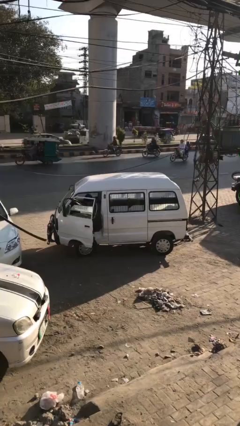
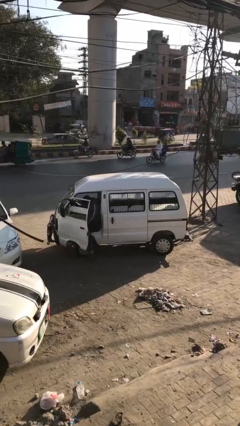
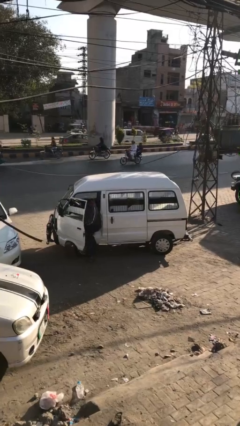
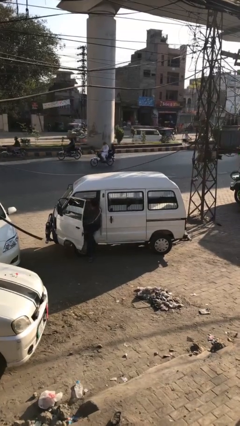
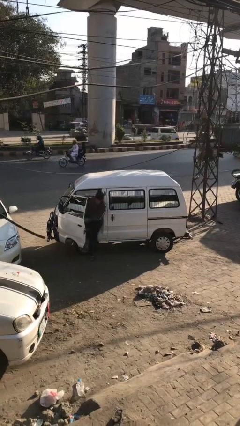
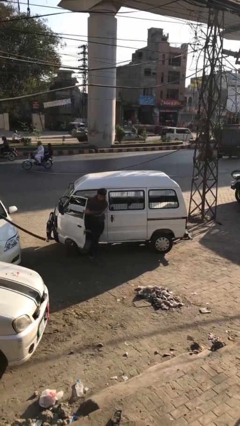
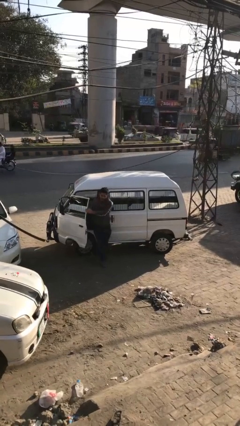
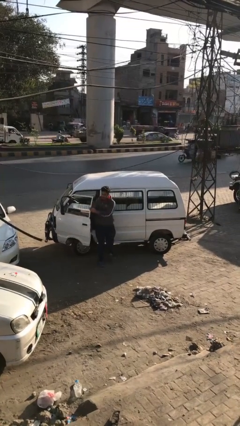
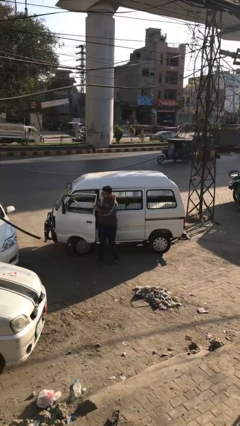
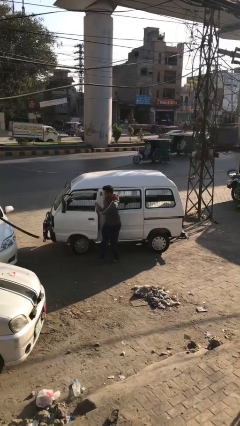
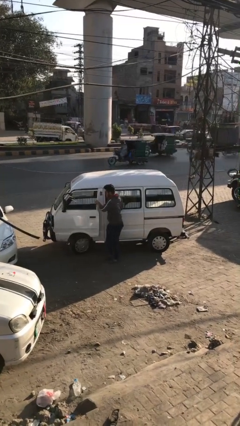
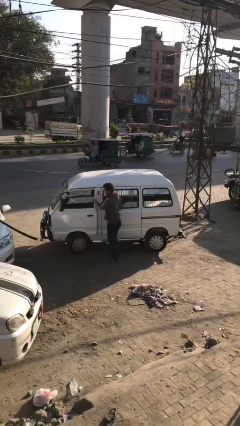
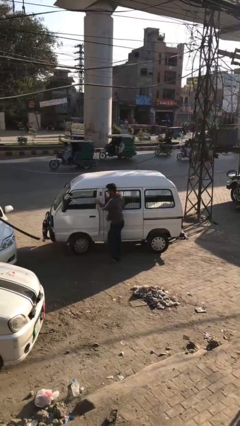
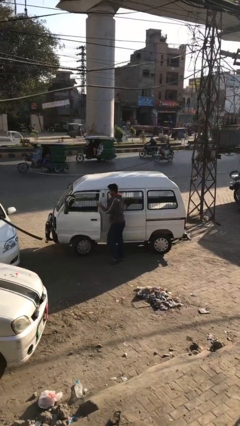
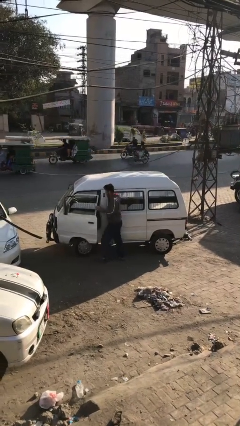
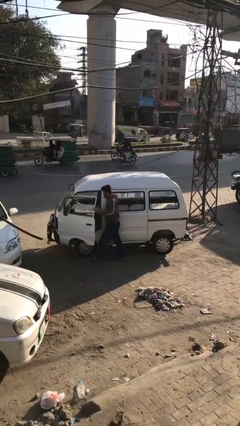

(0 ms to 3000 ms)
car drops off person

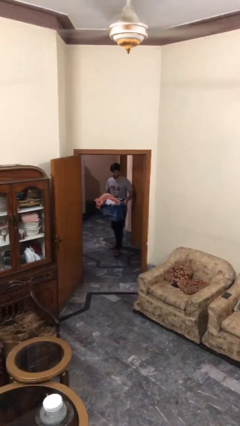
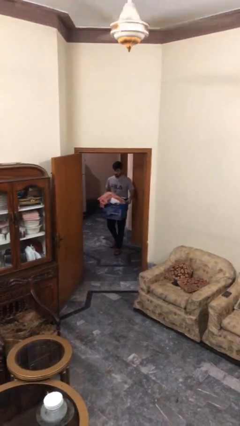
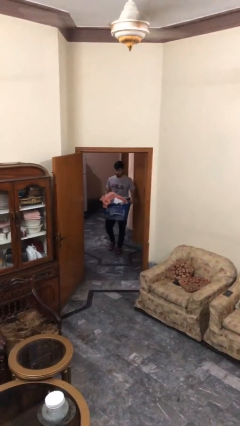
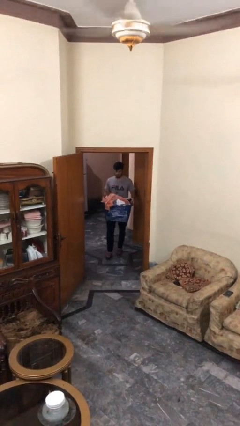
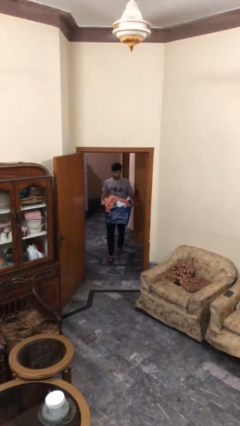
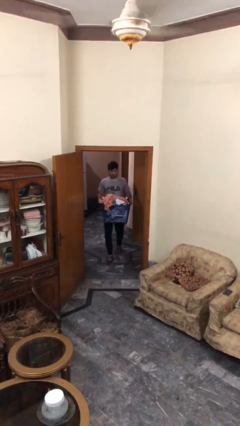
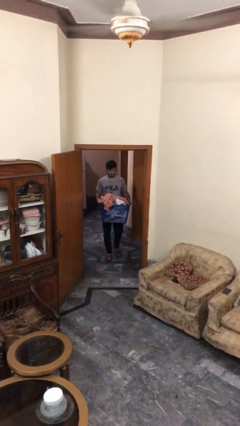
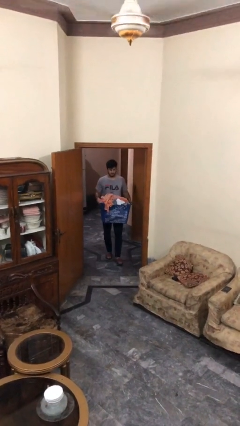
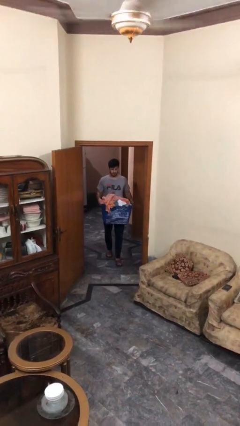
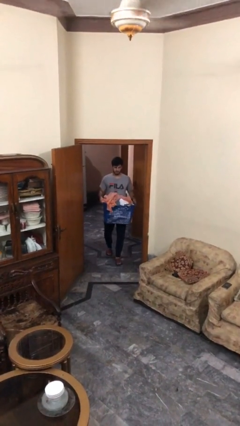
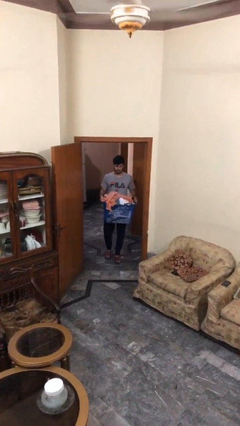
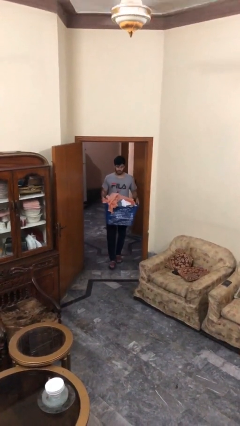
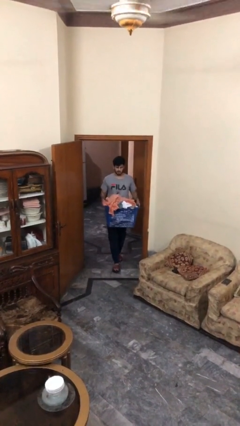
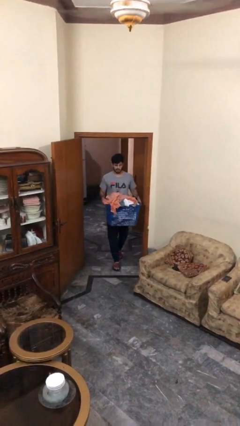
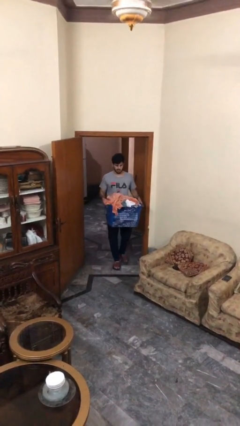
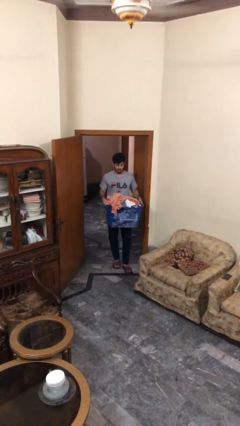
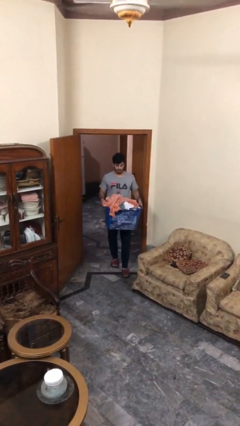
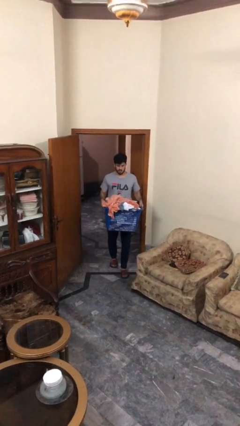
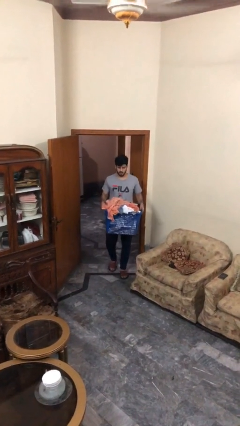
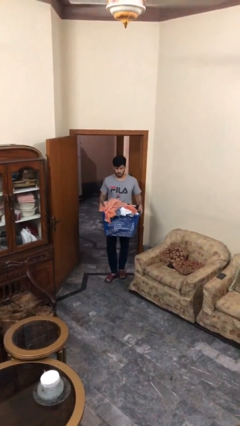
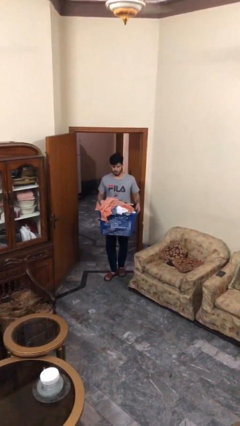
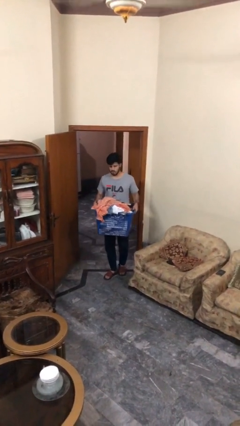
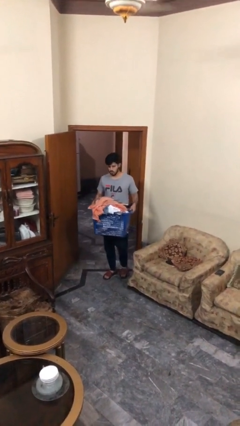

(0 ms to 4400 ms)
person carries laundry basket

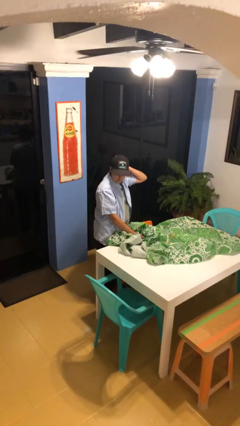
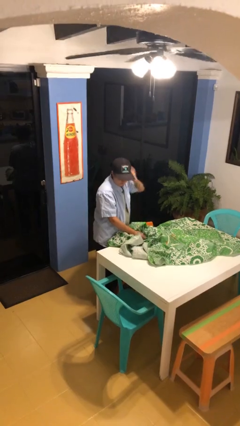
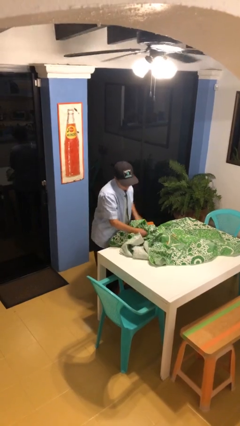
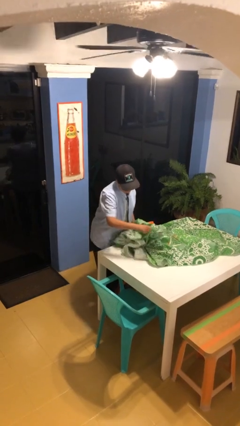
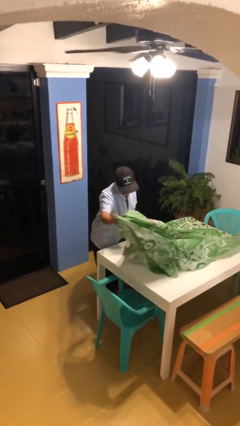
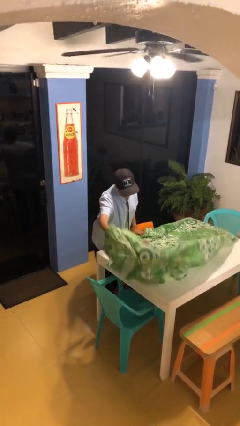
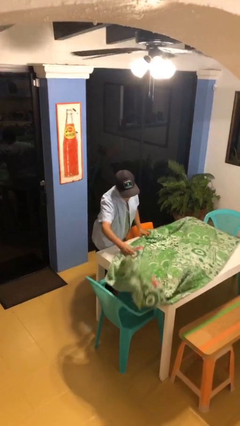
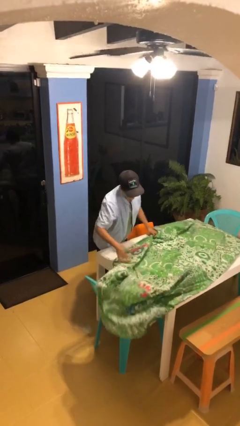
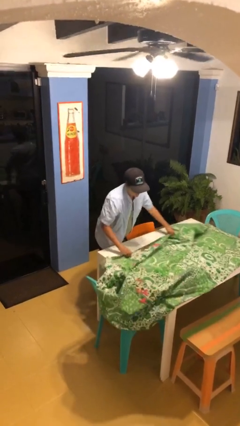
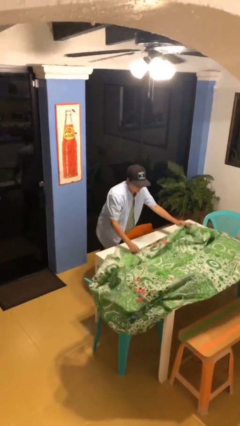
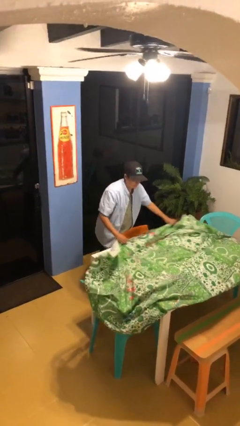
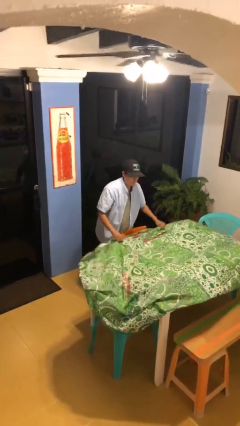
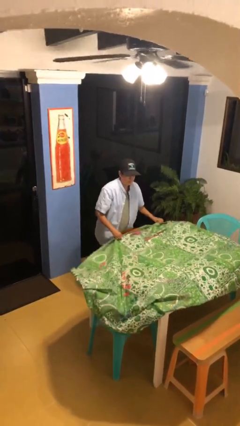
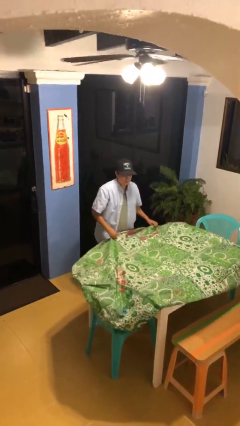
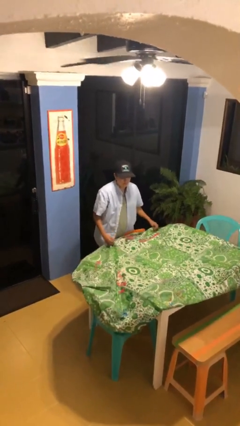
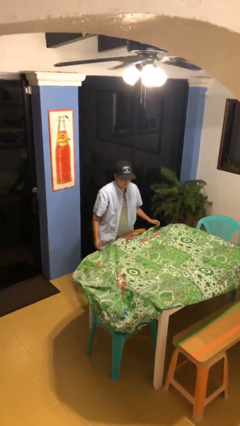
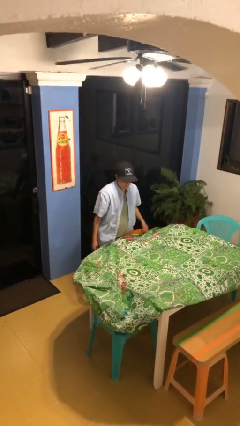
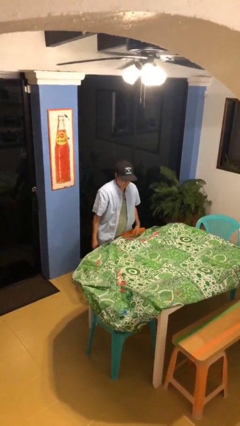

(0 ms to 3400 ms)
person spreads tablecloth

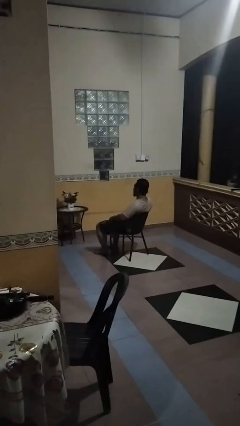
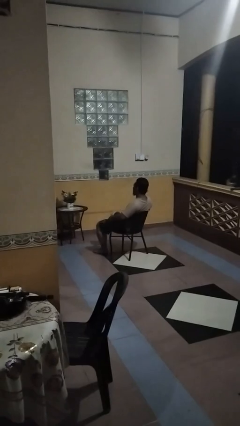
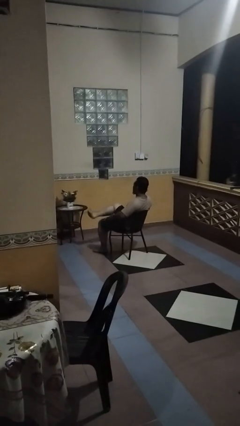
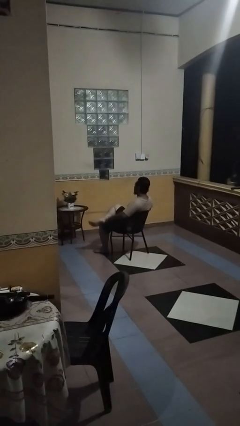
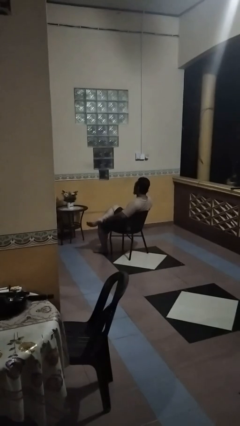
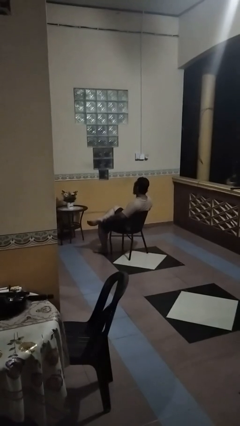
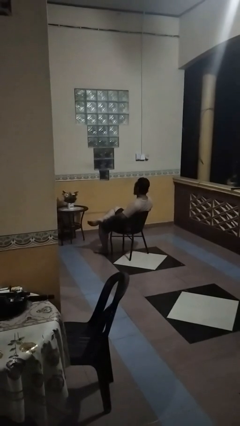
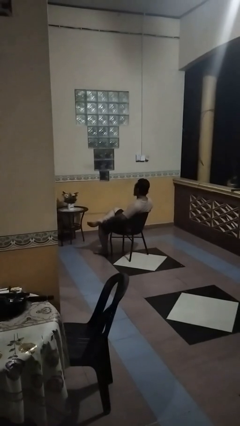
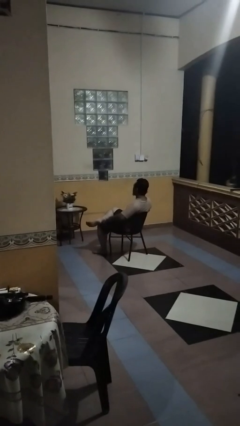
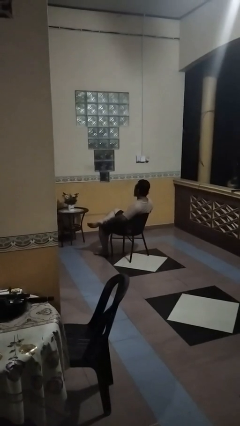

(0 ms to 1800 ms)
person crosses legs

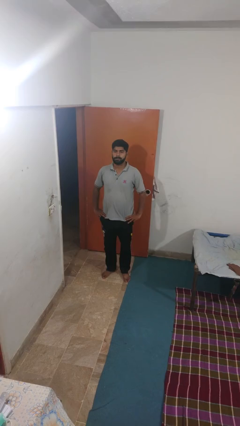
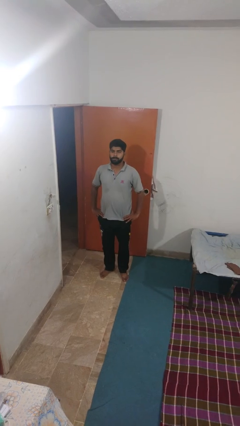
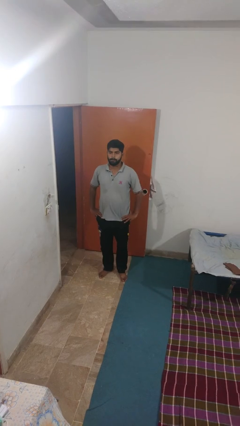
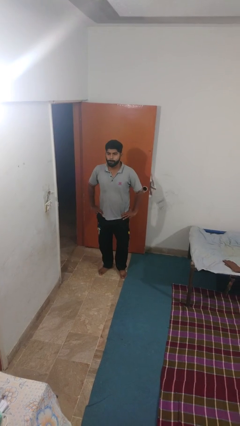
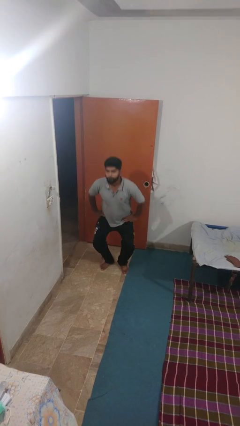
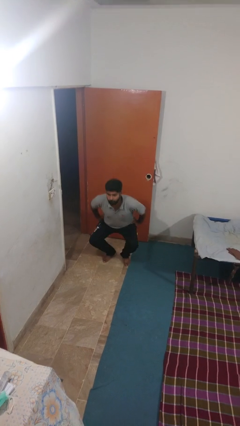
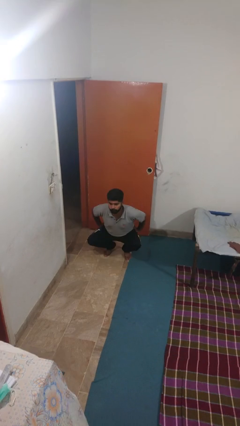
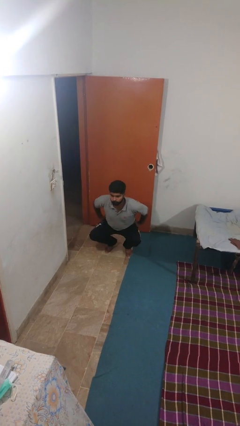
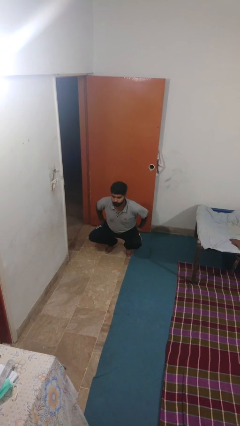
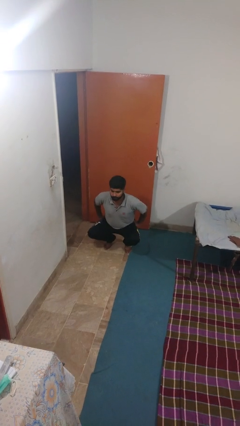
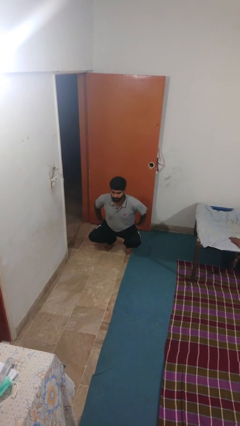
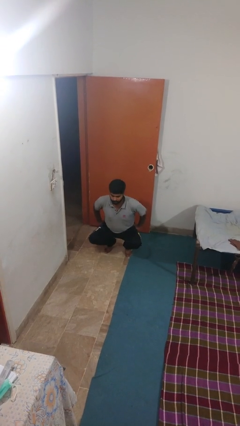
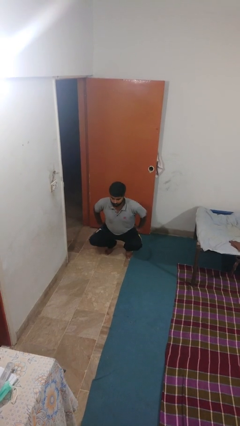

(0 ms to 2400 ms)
person squats

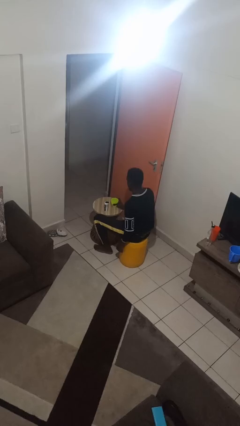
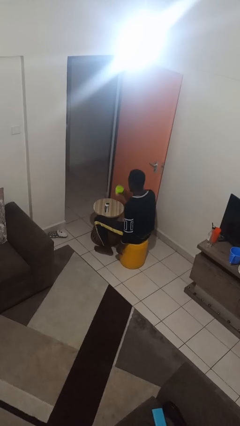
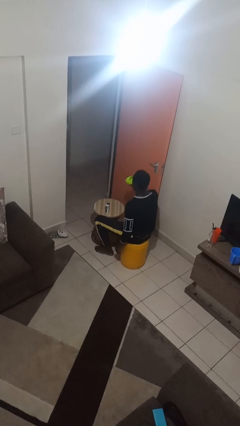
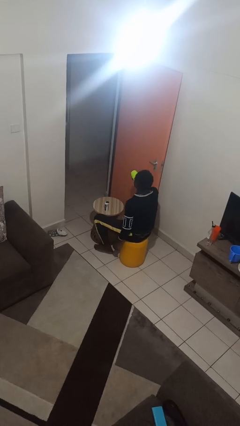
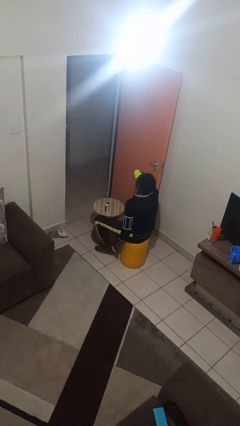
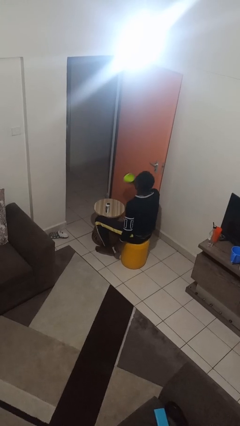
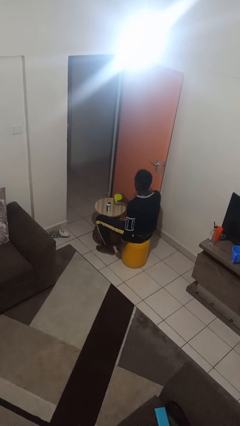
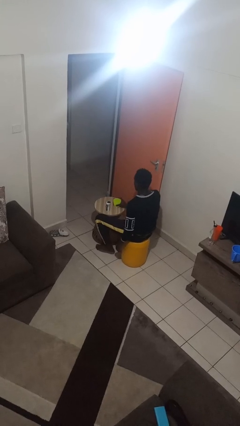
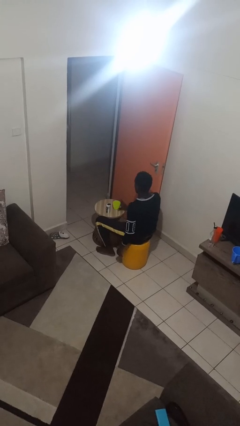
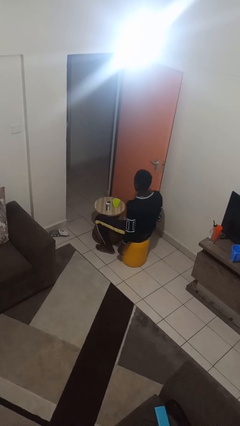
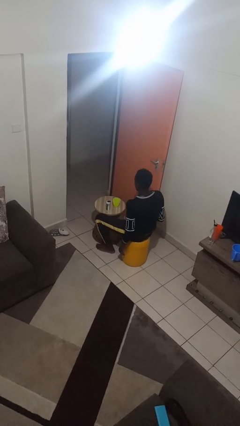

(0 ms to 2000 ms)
person drinks from cup
